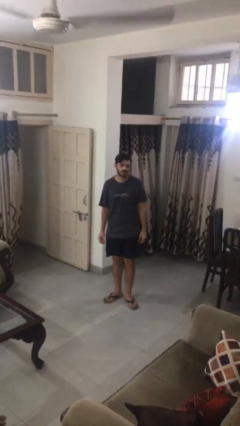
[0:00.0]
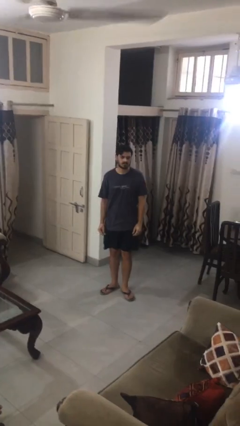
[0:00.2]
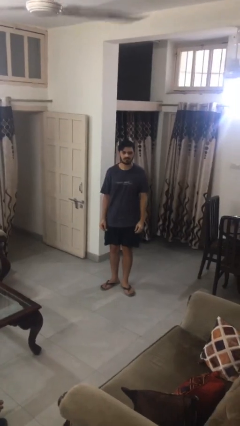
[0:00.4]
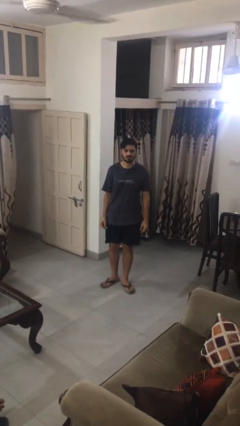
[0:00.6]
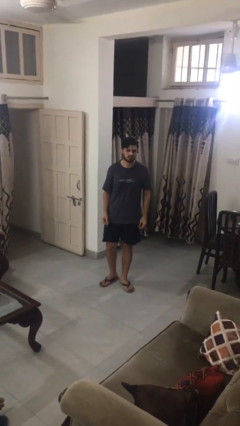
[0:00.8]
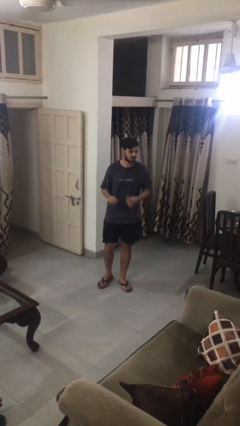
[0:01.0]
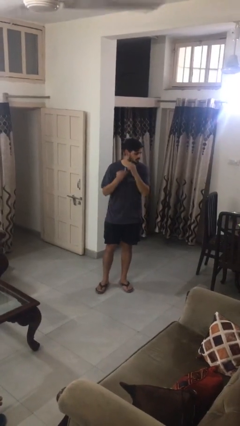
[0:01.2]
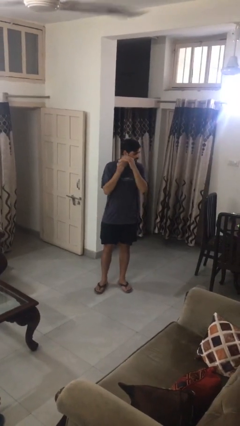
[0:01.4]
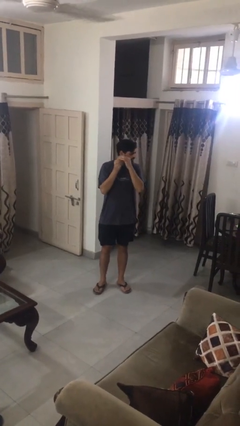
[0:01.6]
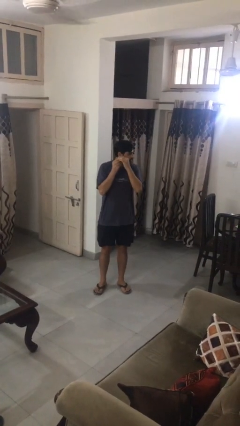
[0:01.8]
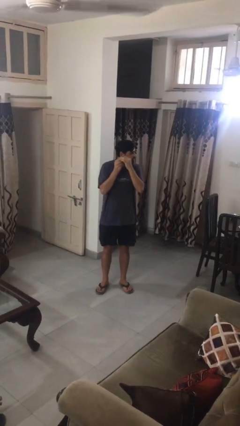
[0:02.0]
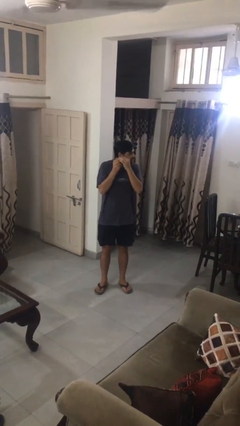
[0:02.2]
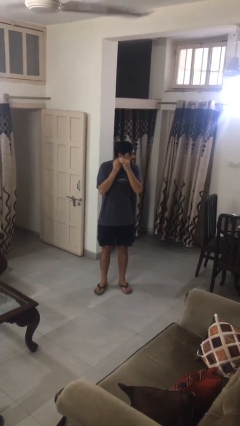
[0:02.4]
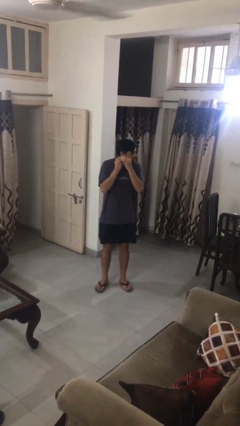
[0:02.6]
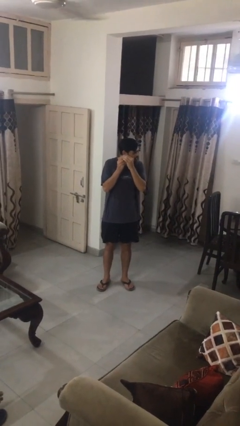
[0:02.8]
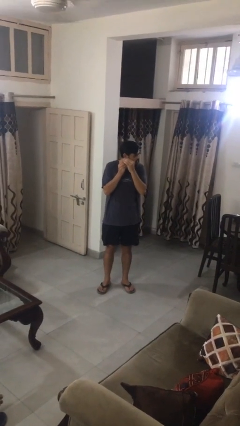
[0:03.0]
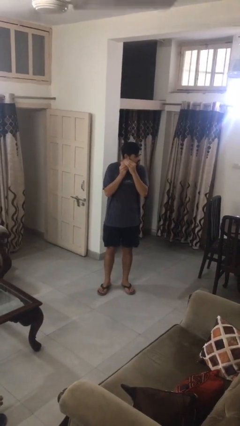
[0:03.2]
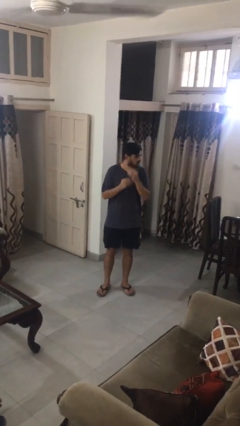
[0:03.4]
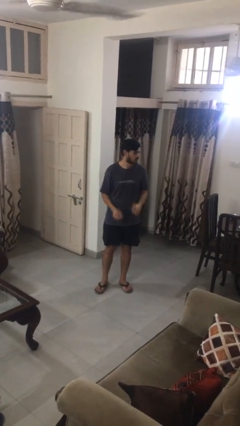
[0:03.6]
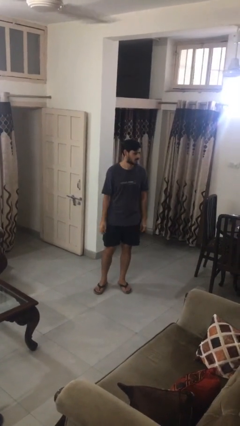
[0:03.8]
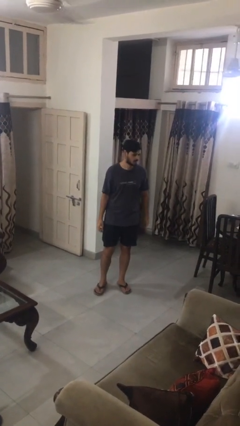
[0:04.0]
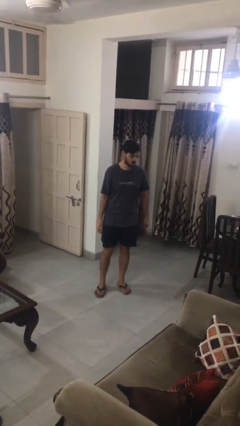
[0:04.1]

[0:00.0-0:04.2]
person puts on earrings

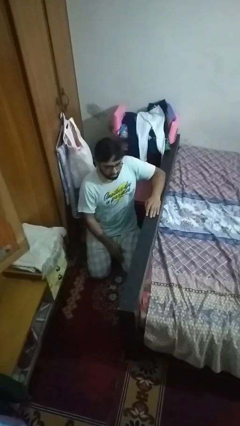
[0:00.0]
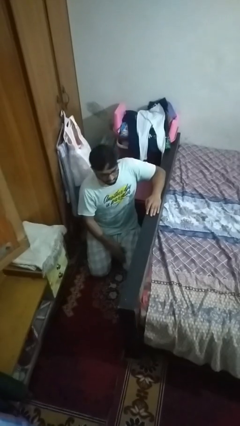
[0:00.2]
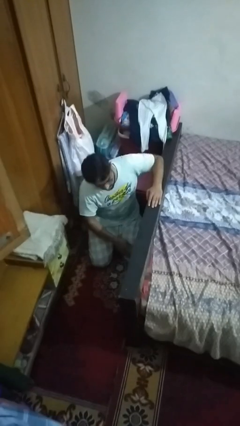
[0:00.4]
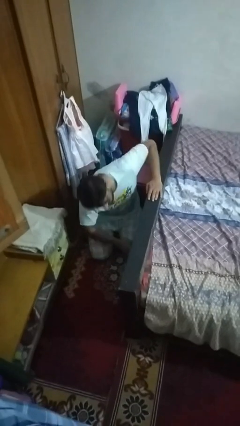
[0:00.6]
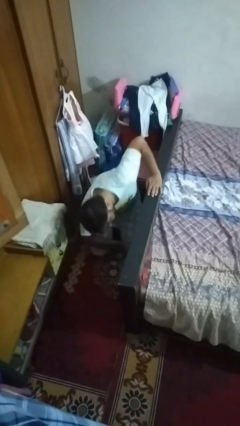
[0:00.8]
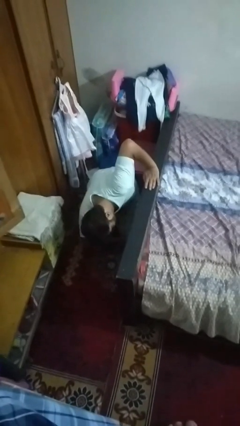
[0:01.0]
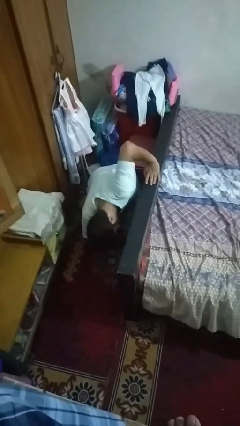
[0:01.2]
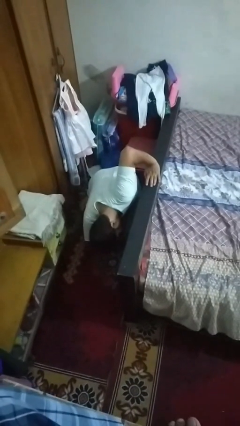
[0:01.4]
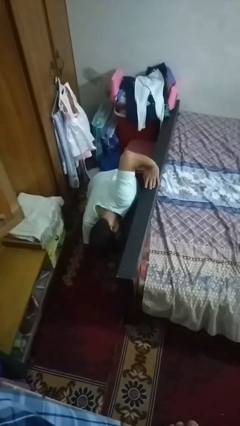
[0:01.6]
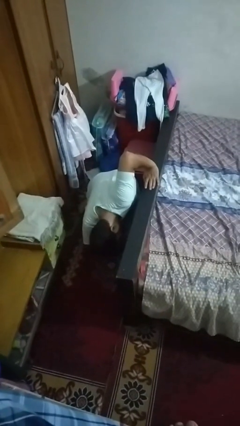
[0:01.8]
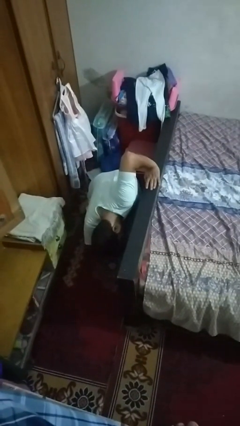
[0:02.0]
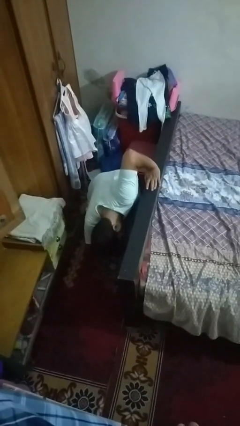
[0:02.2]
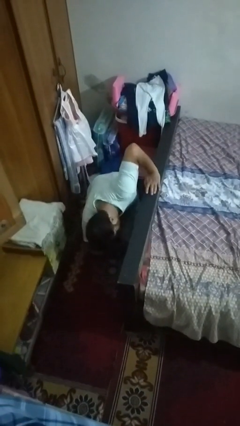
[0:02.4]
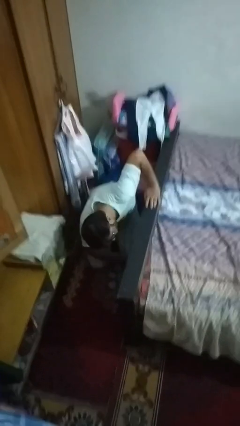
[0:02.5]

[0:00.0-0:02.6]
person searches under bed

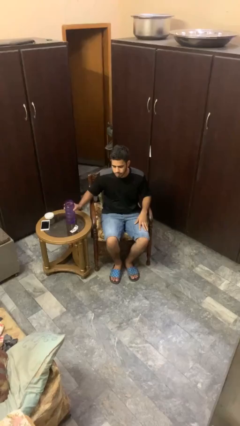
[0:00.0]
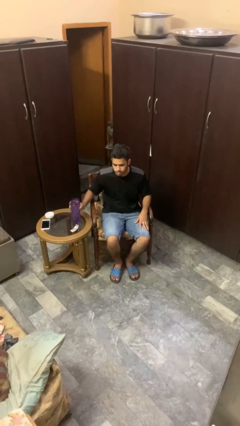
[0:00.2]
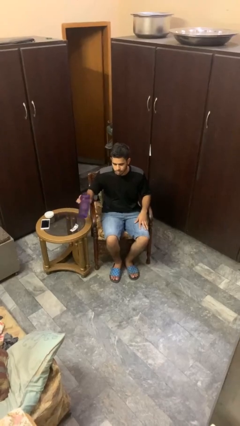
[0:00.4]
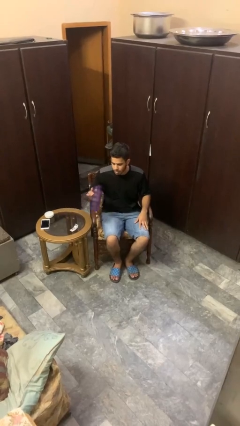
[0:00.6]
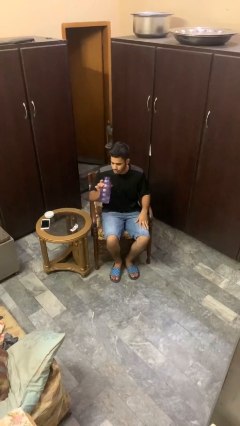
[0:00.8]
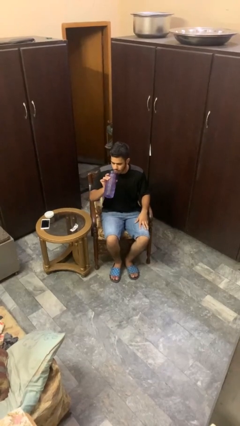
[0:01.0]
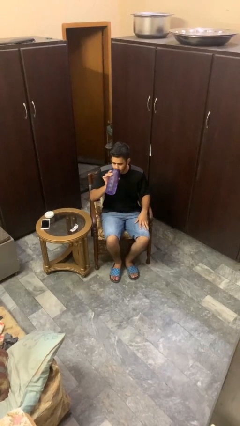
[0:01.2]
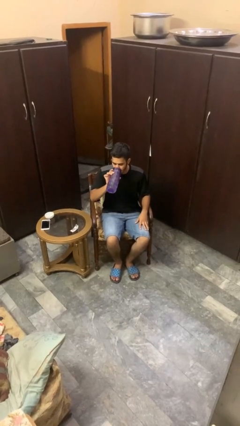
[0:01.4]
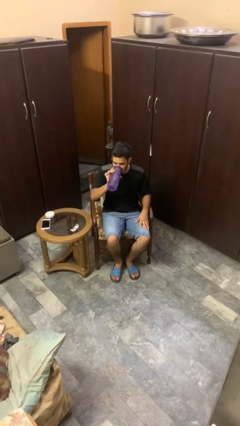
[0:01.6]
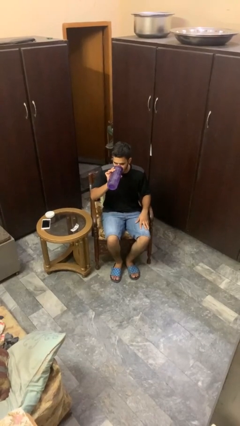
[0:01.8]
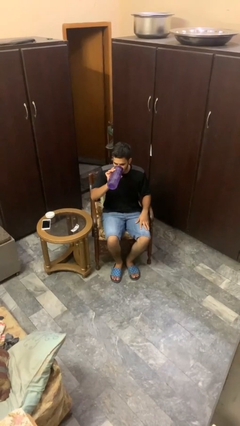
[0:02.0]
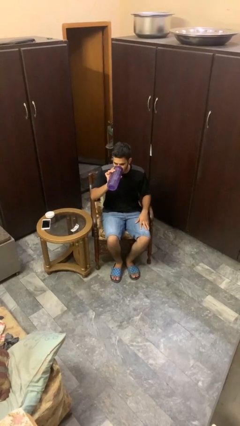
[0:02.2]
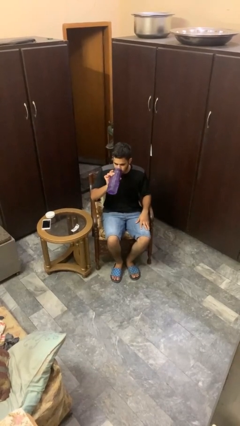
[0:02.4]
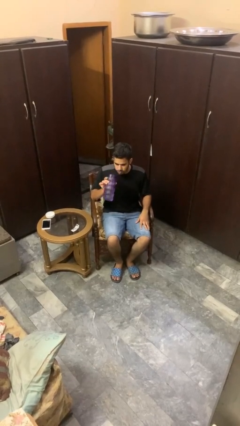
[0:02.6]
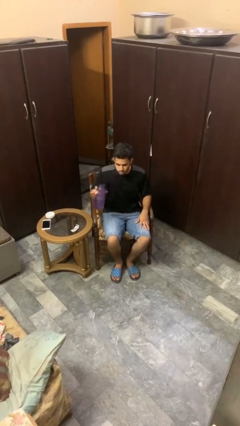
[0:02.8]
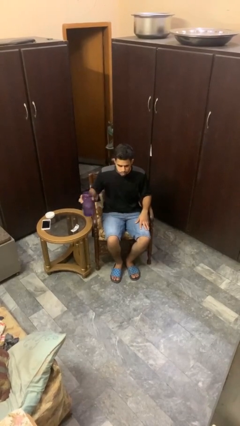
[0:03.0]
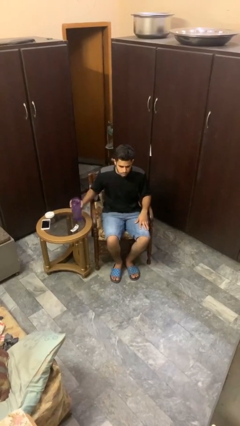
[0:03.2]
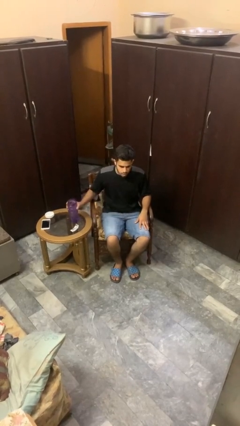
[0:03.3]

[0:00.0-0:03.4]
person drinks from cup

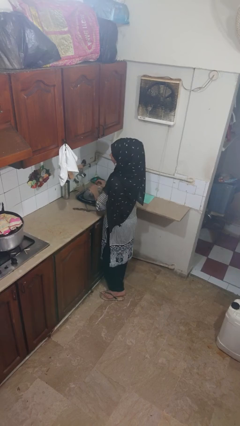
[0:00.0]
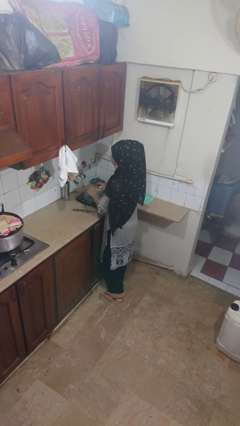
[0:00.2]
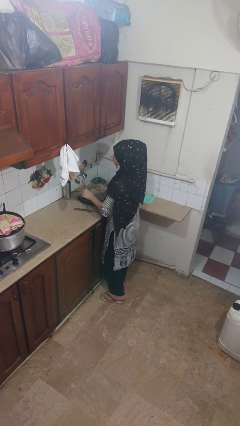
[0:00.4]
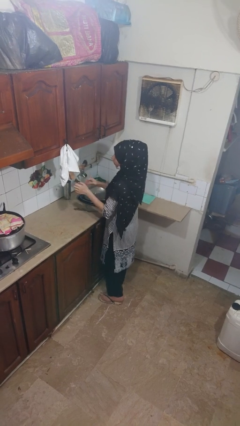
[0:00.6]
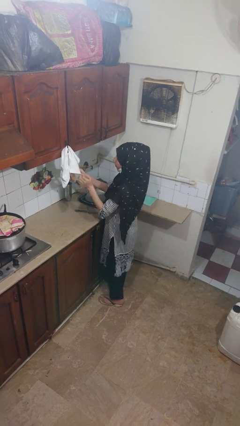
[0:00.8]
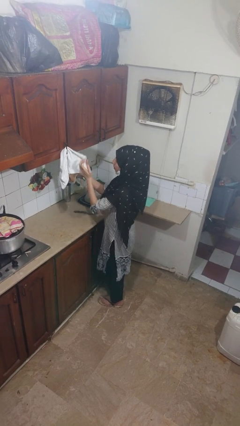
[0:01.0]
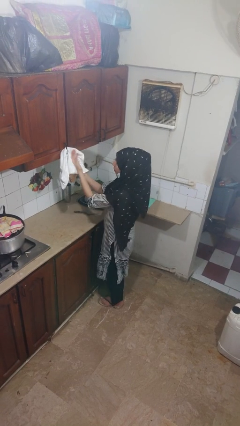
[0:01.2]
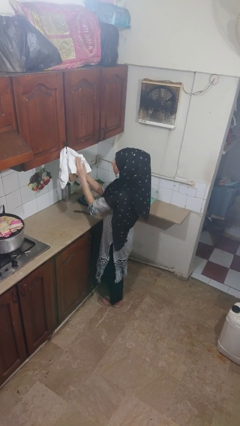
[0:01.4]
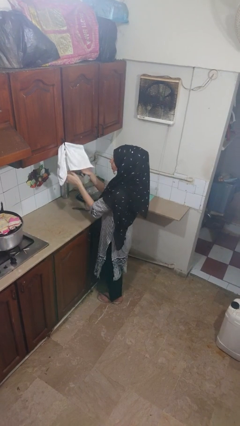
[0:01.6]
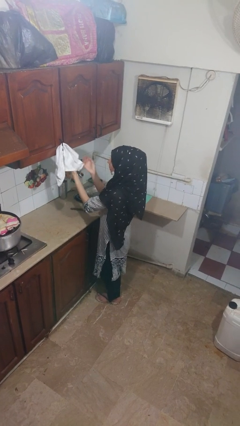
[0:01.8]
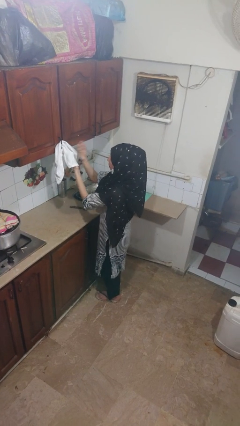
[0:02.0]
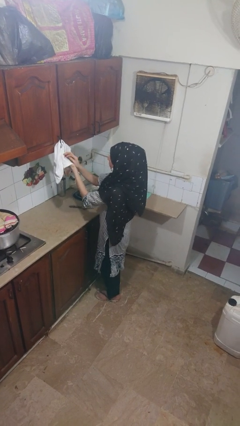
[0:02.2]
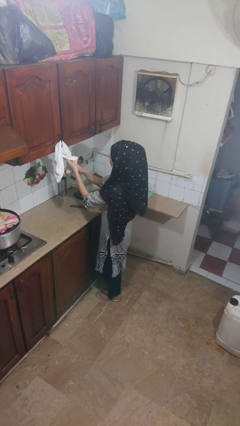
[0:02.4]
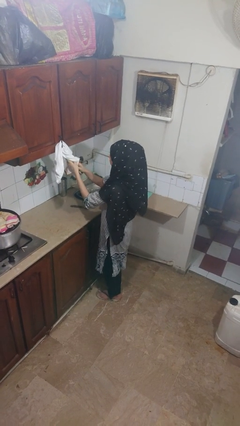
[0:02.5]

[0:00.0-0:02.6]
person dries hands with towel

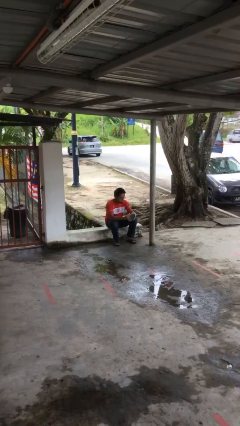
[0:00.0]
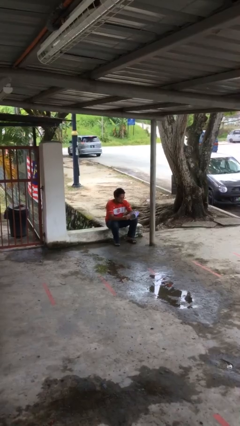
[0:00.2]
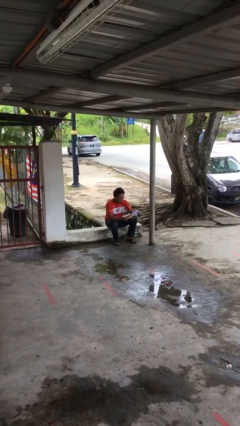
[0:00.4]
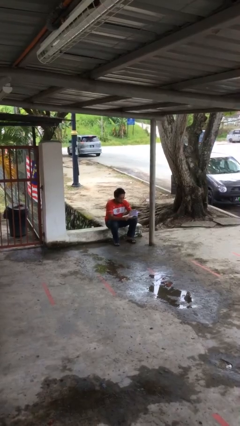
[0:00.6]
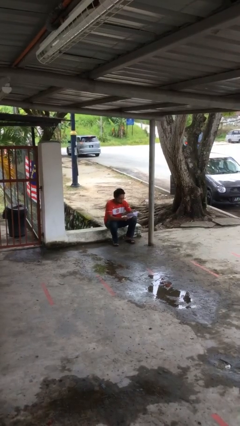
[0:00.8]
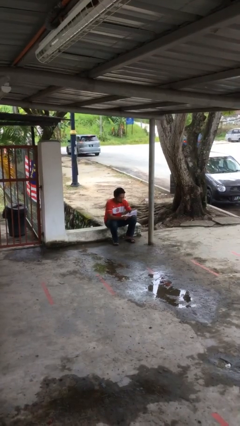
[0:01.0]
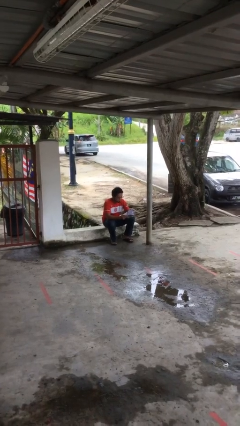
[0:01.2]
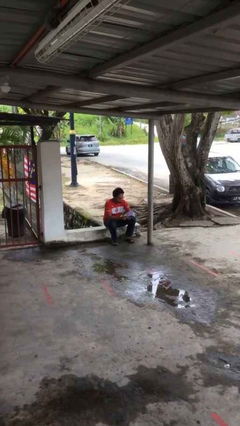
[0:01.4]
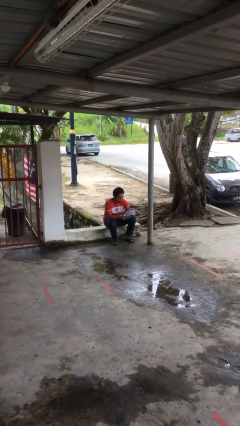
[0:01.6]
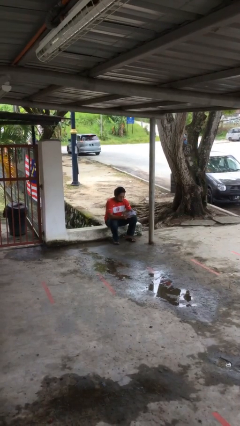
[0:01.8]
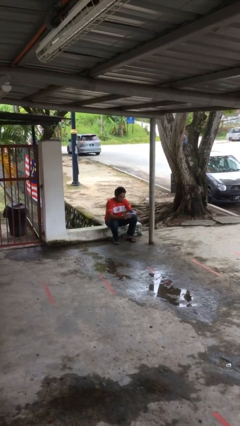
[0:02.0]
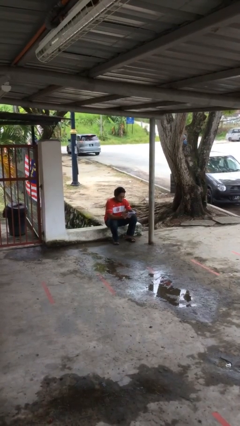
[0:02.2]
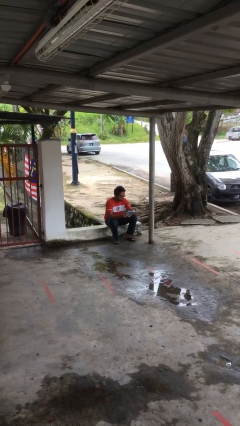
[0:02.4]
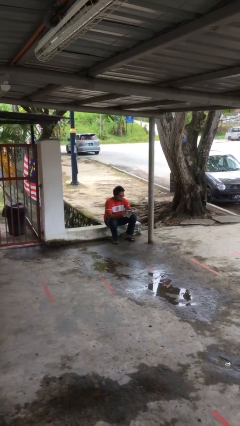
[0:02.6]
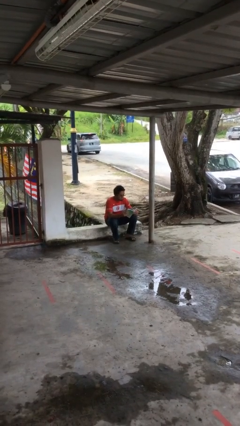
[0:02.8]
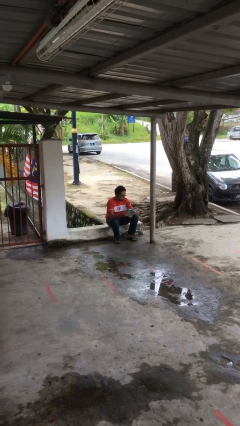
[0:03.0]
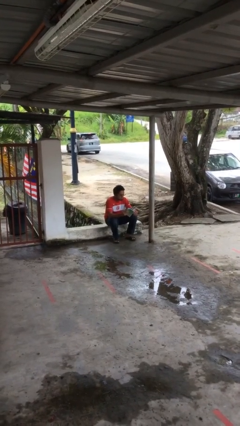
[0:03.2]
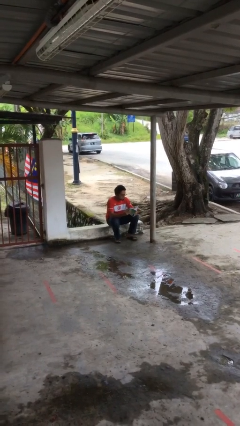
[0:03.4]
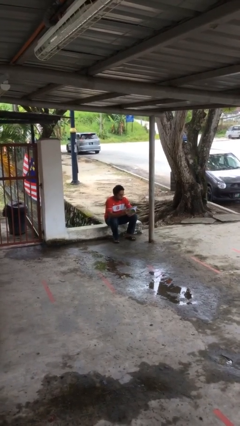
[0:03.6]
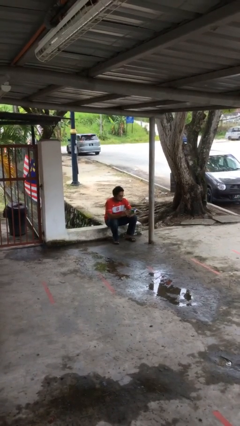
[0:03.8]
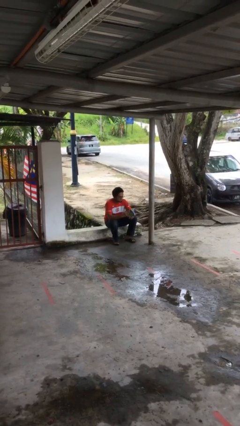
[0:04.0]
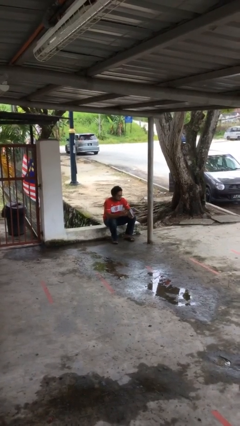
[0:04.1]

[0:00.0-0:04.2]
person reads document

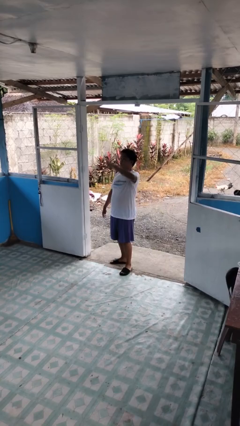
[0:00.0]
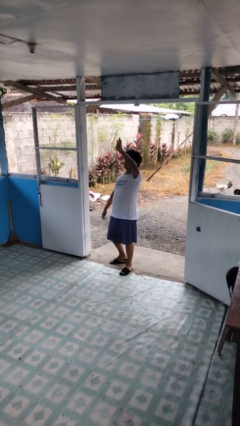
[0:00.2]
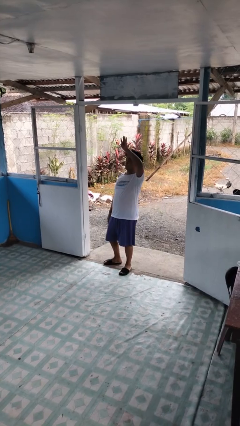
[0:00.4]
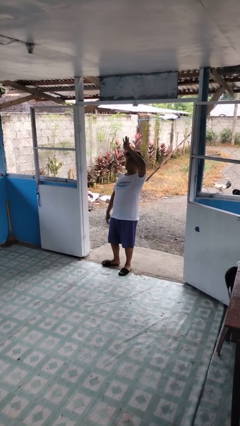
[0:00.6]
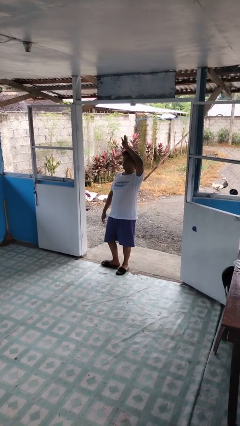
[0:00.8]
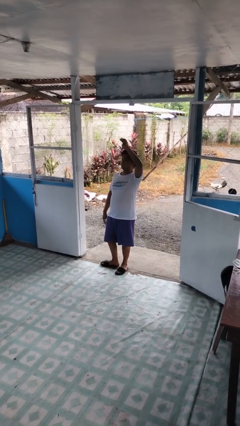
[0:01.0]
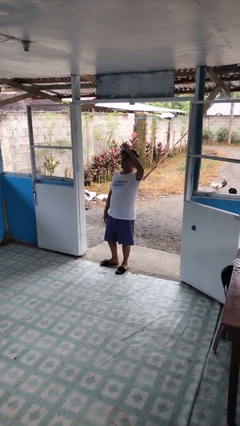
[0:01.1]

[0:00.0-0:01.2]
person gestures number four
